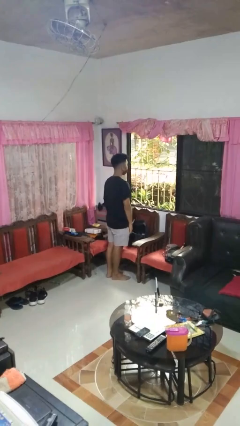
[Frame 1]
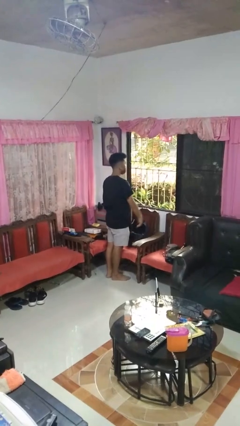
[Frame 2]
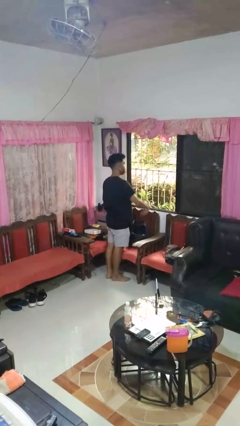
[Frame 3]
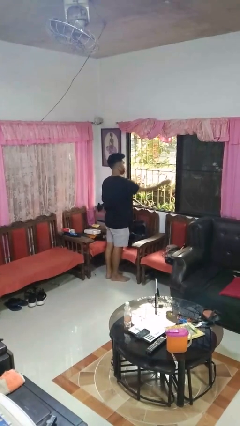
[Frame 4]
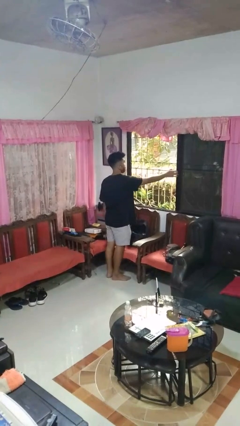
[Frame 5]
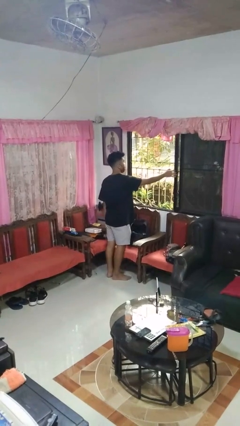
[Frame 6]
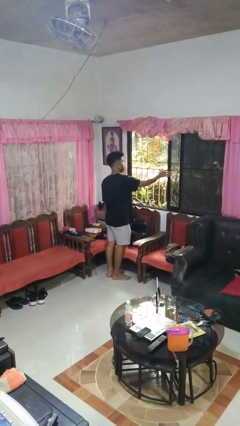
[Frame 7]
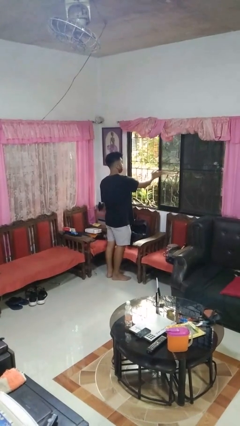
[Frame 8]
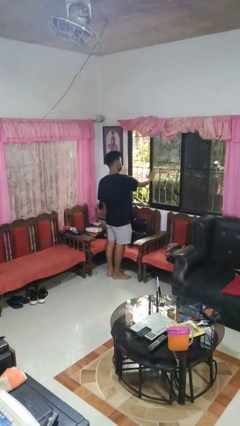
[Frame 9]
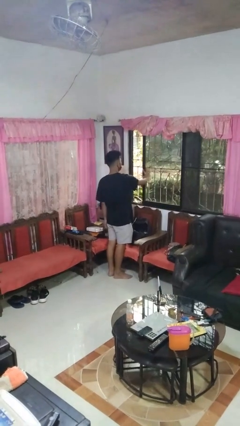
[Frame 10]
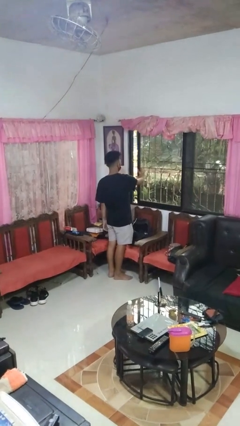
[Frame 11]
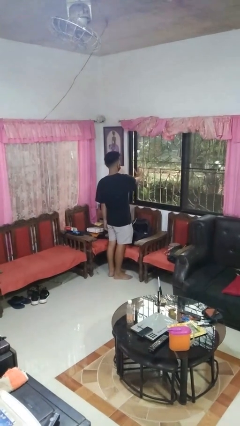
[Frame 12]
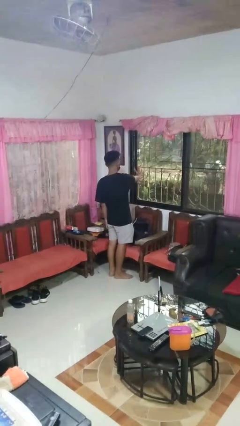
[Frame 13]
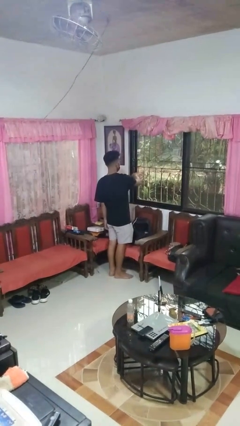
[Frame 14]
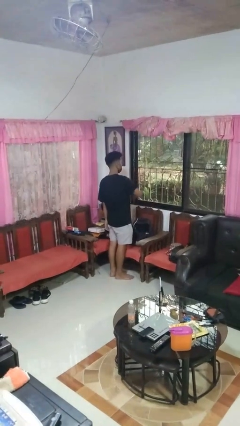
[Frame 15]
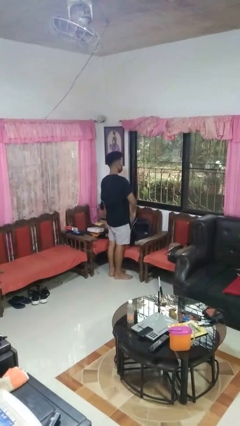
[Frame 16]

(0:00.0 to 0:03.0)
person closes home window

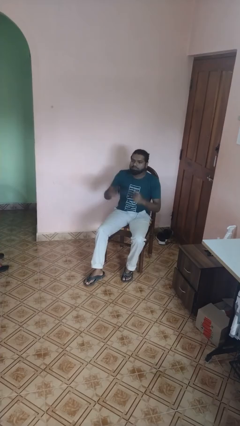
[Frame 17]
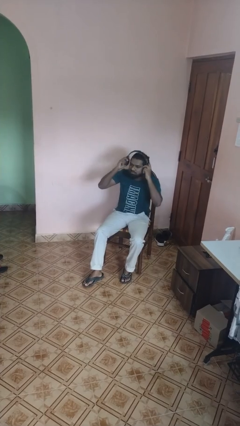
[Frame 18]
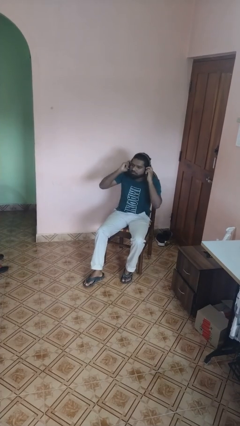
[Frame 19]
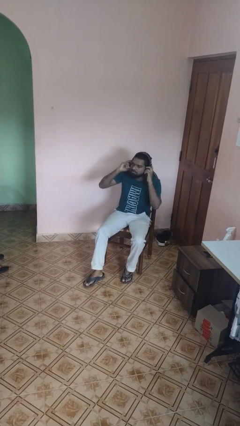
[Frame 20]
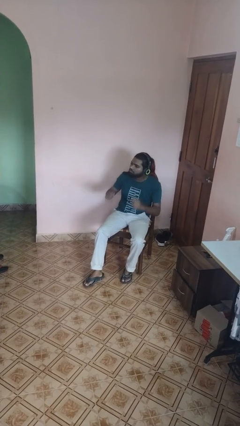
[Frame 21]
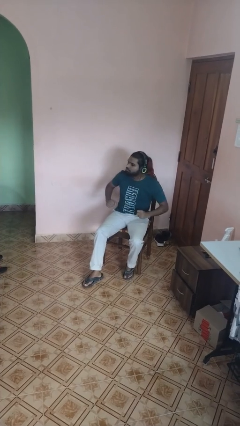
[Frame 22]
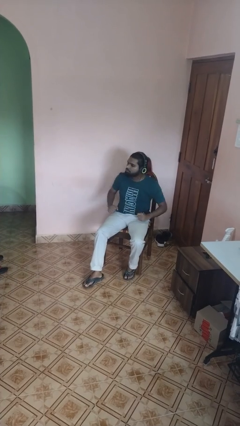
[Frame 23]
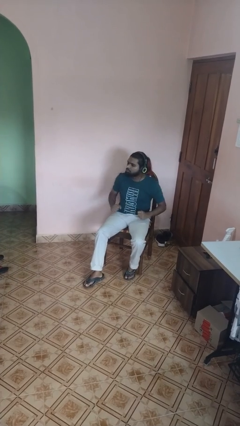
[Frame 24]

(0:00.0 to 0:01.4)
person puts on headphones

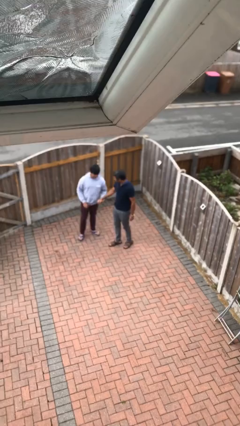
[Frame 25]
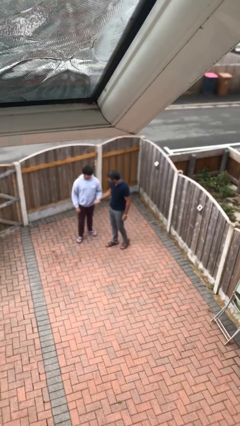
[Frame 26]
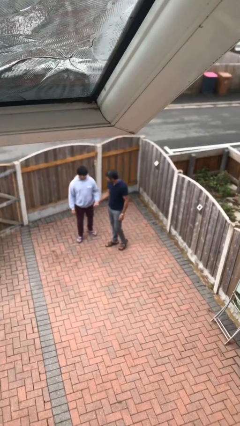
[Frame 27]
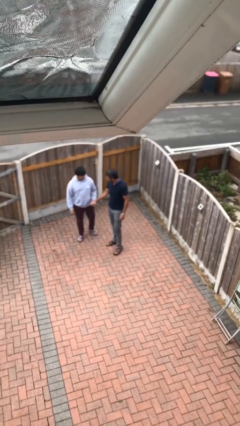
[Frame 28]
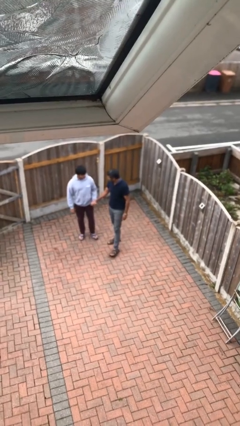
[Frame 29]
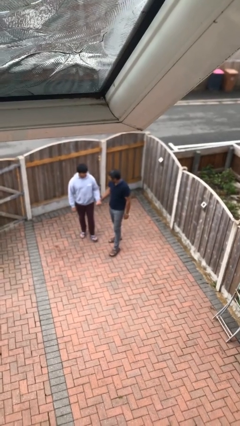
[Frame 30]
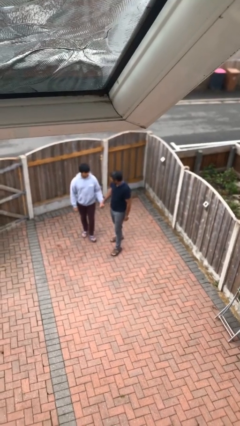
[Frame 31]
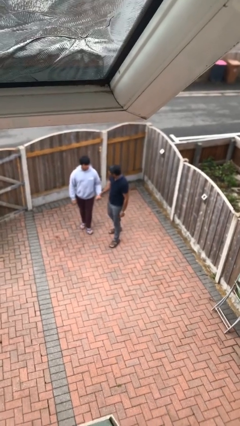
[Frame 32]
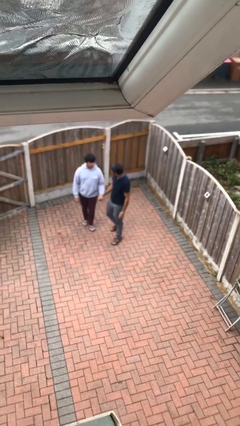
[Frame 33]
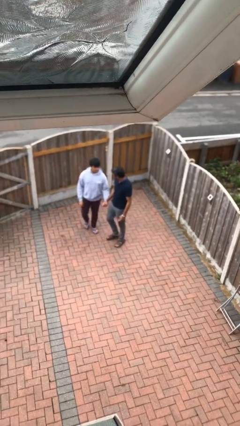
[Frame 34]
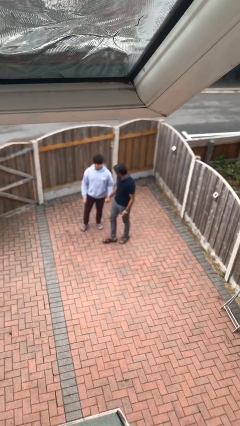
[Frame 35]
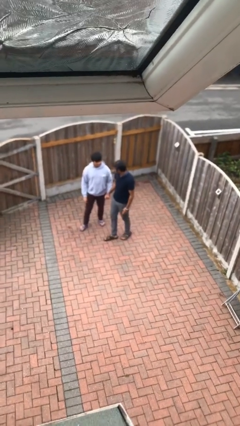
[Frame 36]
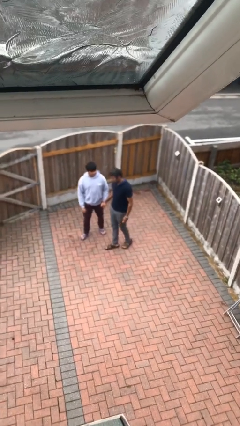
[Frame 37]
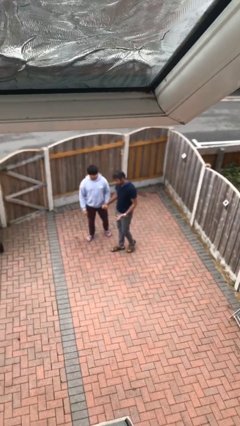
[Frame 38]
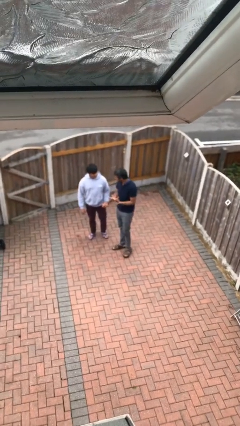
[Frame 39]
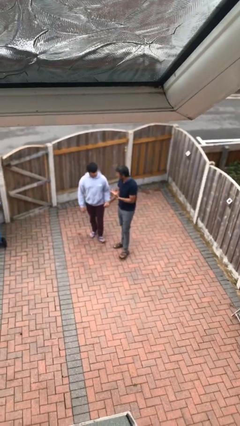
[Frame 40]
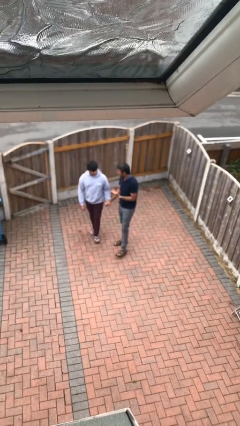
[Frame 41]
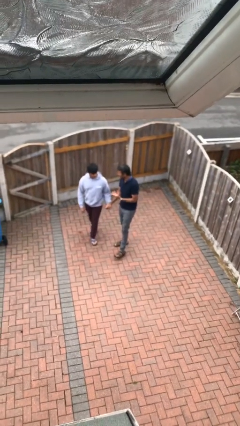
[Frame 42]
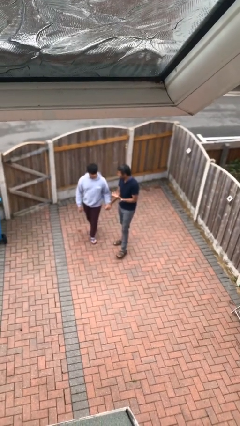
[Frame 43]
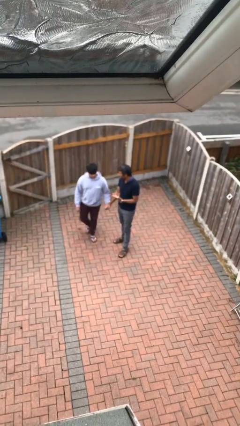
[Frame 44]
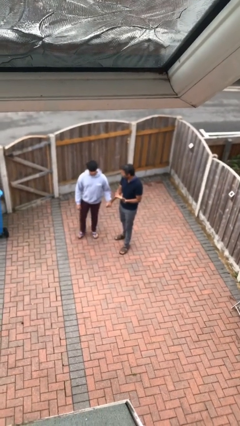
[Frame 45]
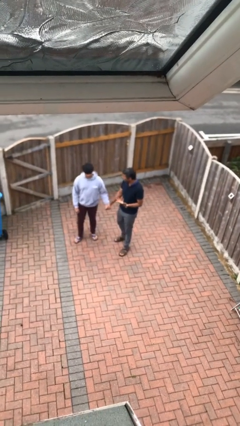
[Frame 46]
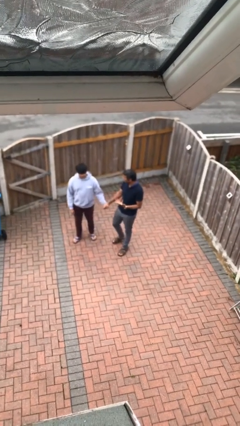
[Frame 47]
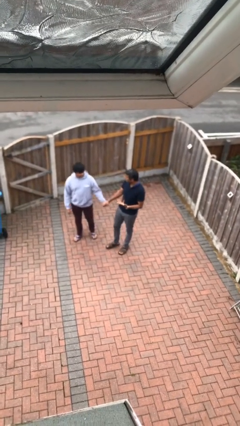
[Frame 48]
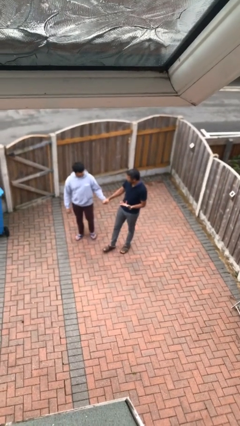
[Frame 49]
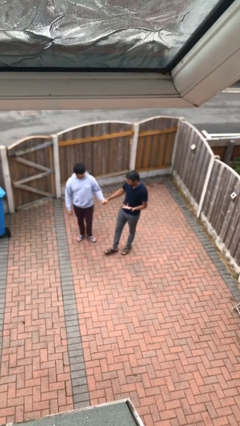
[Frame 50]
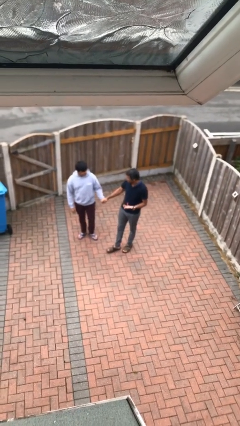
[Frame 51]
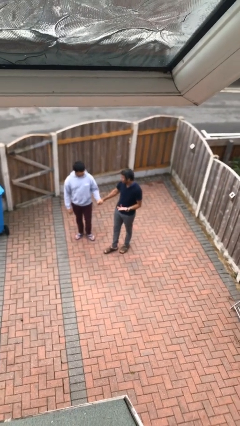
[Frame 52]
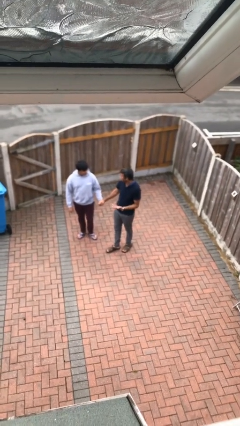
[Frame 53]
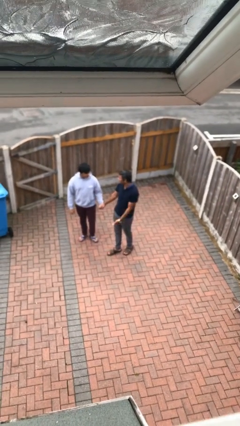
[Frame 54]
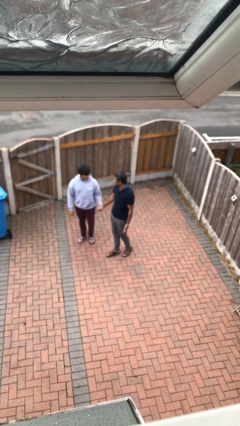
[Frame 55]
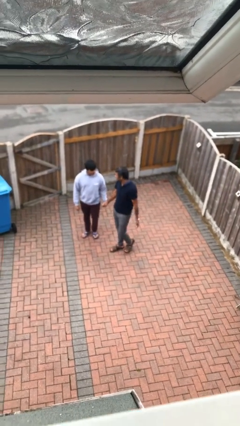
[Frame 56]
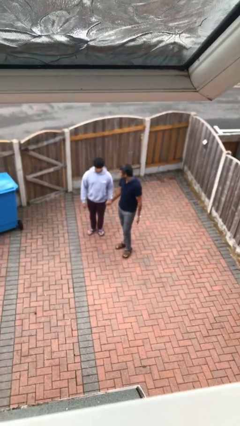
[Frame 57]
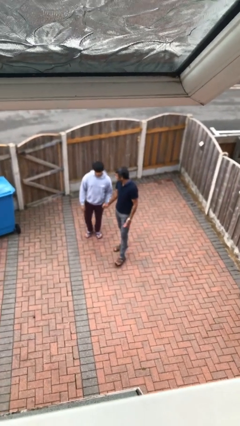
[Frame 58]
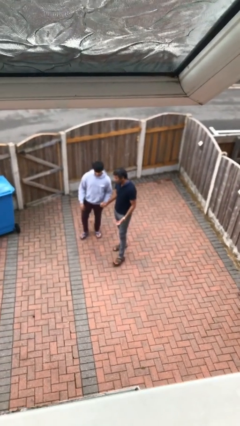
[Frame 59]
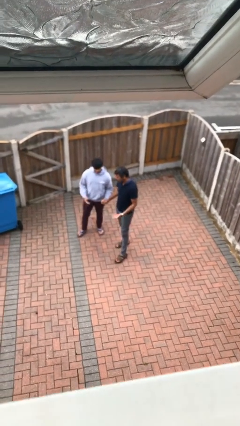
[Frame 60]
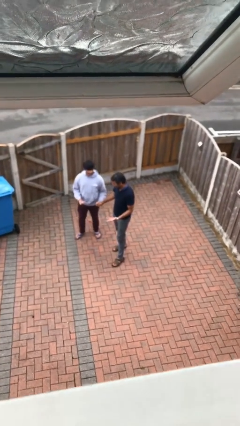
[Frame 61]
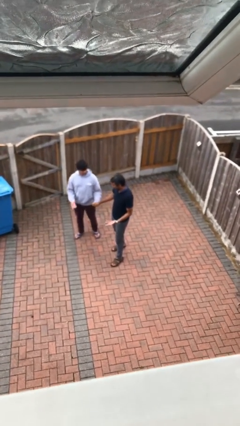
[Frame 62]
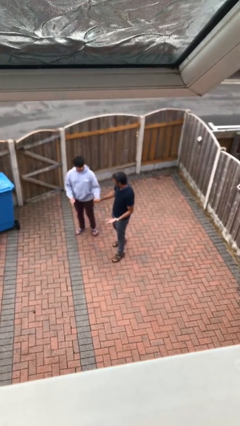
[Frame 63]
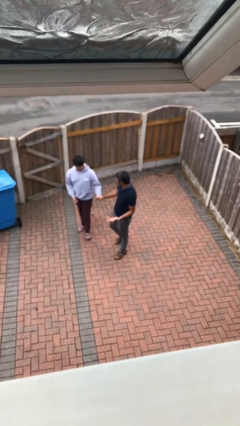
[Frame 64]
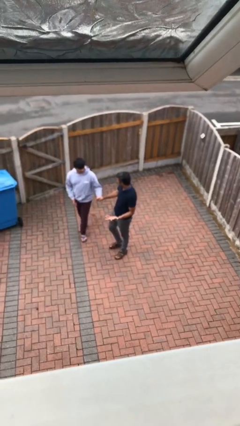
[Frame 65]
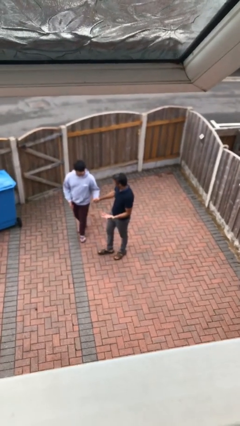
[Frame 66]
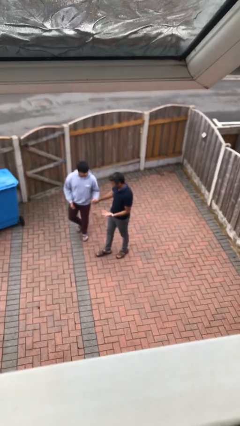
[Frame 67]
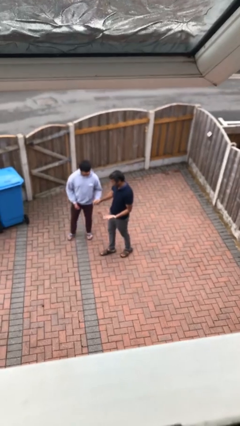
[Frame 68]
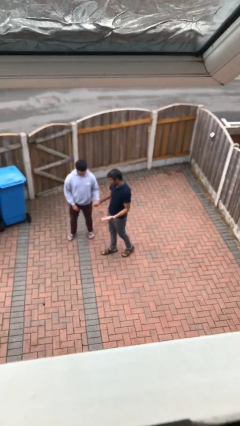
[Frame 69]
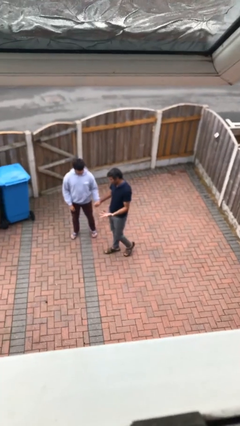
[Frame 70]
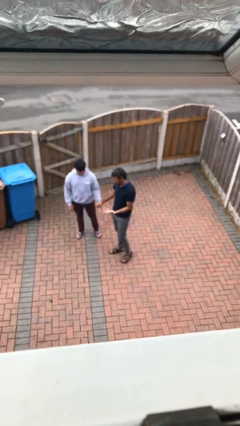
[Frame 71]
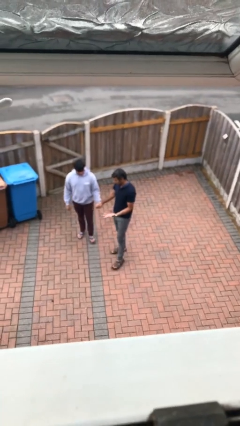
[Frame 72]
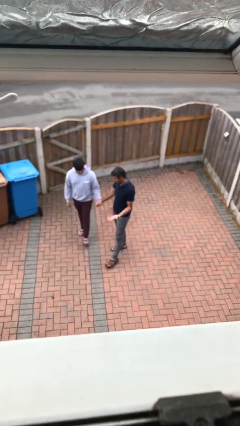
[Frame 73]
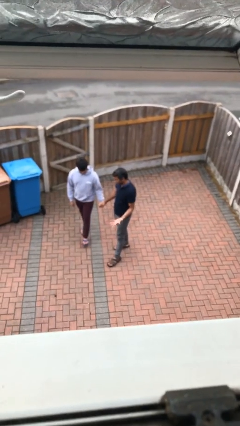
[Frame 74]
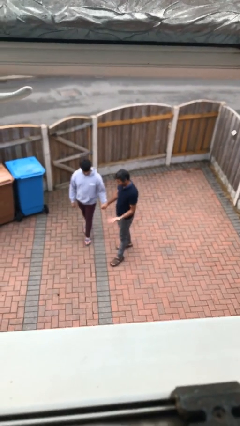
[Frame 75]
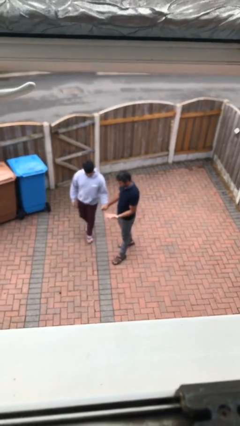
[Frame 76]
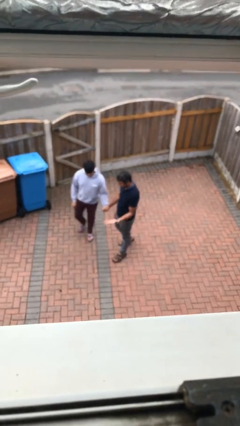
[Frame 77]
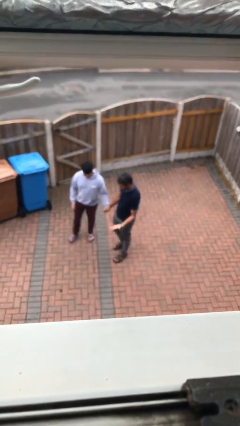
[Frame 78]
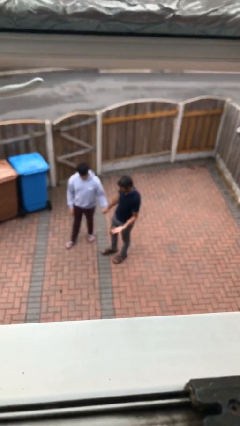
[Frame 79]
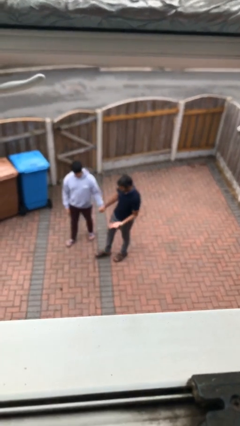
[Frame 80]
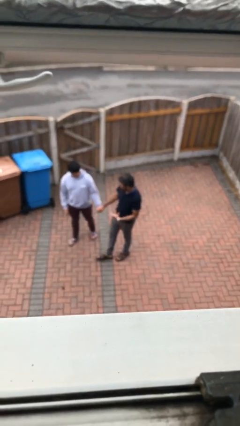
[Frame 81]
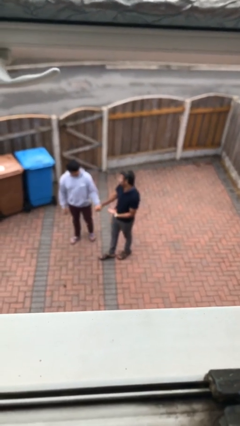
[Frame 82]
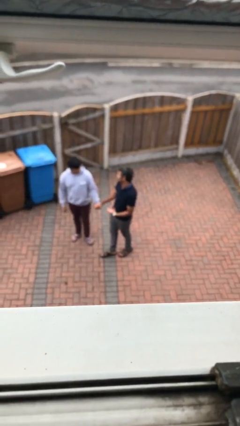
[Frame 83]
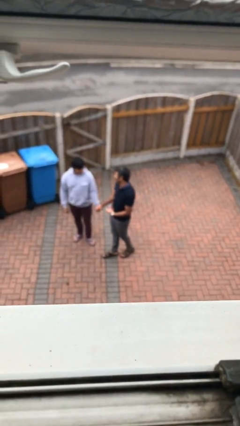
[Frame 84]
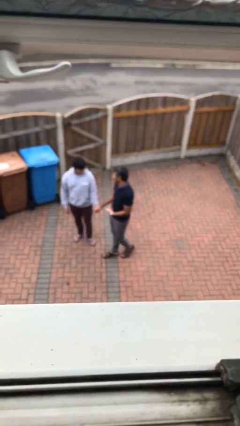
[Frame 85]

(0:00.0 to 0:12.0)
person holds hand

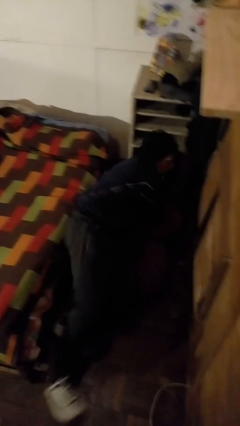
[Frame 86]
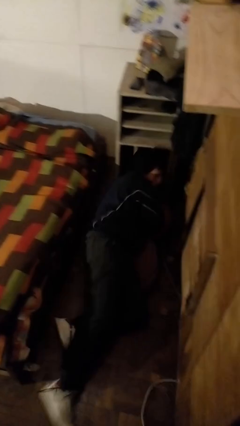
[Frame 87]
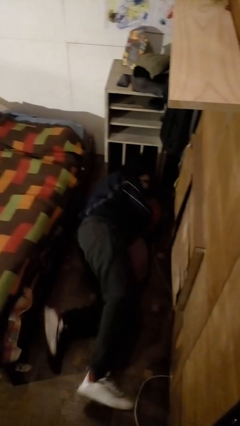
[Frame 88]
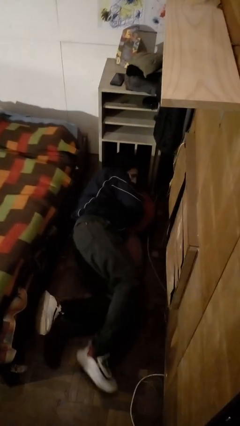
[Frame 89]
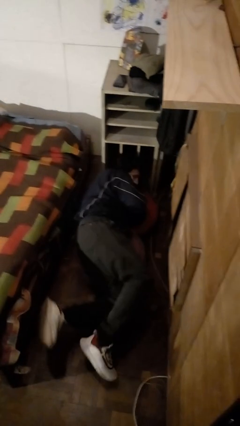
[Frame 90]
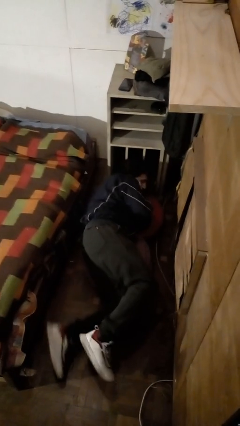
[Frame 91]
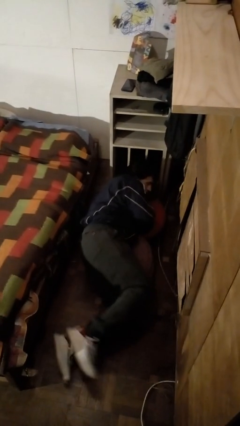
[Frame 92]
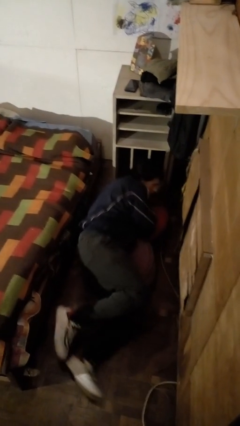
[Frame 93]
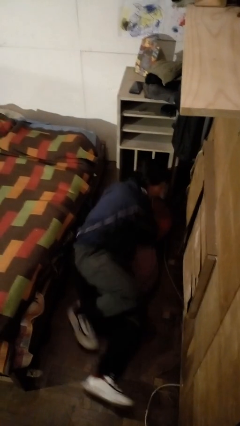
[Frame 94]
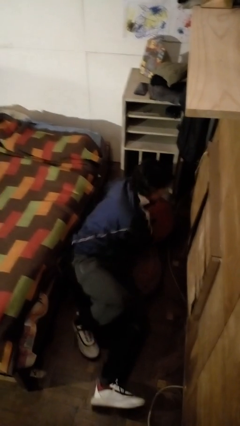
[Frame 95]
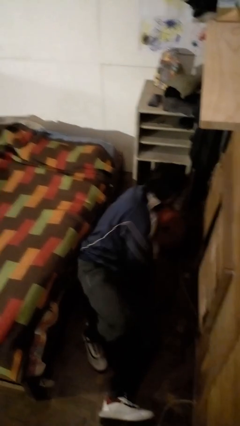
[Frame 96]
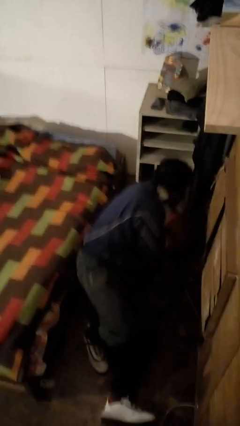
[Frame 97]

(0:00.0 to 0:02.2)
person falls from bed
